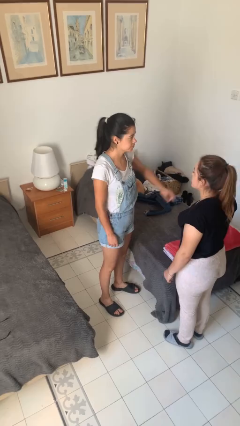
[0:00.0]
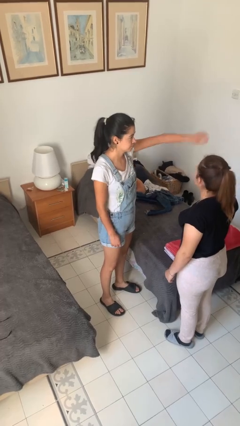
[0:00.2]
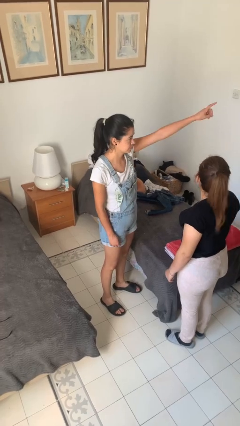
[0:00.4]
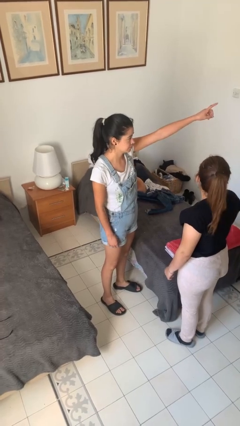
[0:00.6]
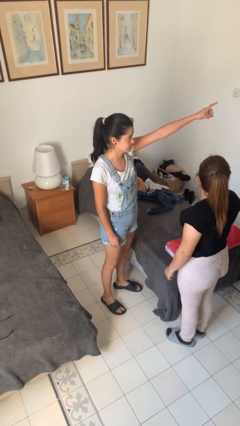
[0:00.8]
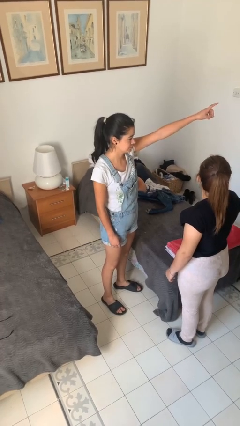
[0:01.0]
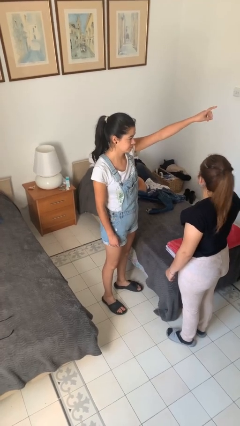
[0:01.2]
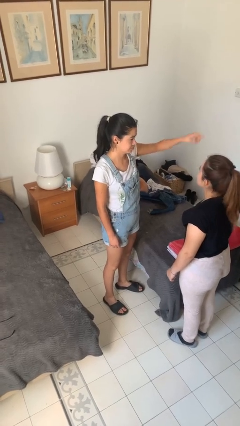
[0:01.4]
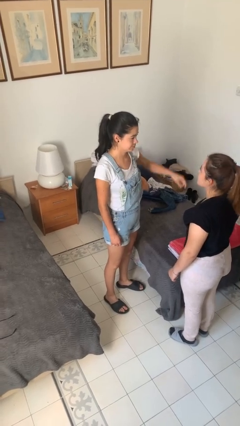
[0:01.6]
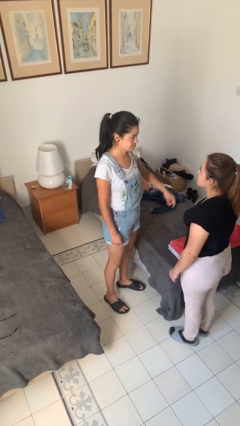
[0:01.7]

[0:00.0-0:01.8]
person points at person

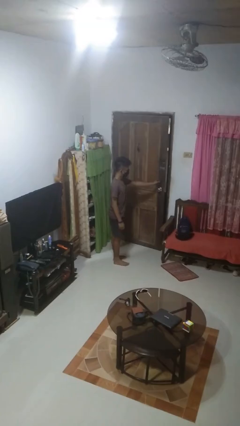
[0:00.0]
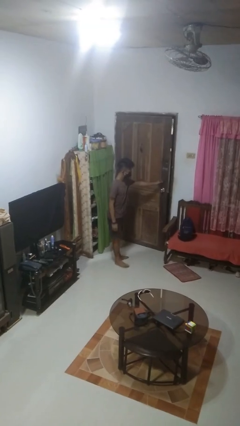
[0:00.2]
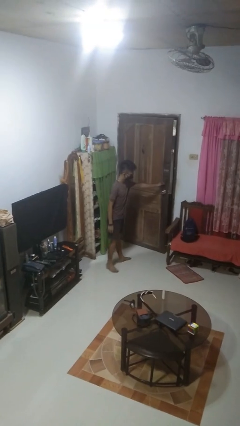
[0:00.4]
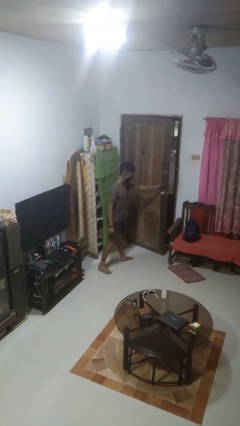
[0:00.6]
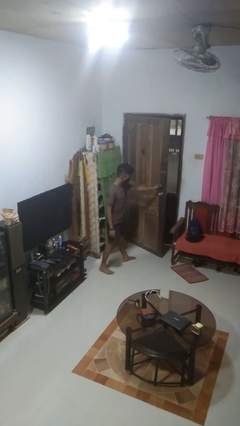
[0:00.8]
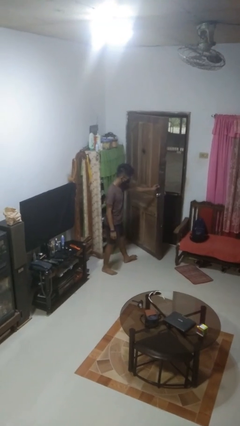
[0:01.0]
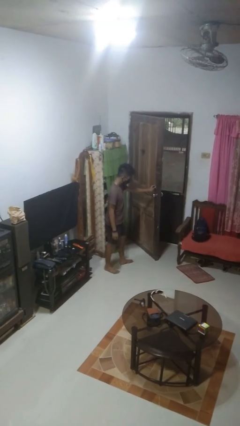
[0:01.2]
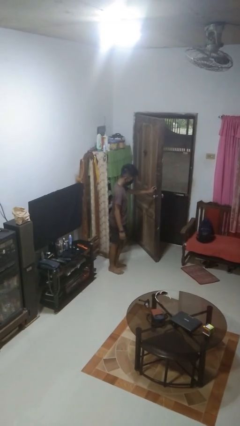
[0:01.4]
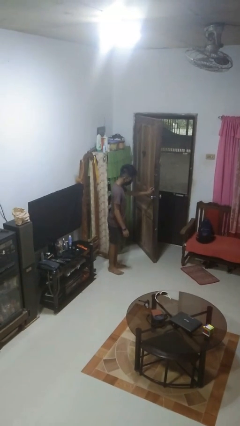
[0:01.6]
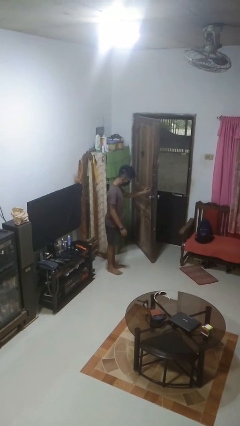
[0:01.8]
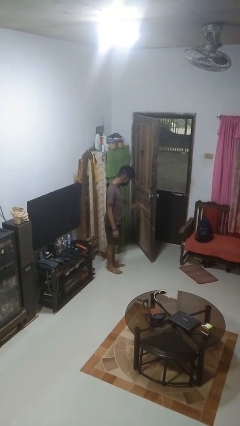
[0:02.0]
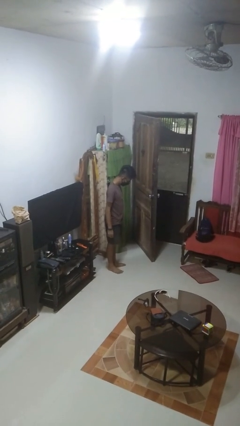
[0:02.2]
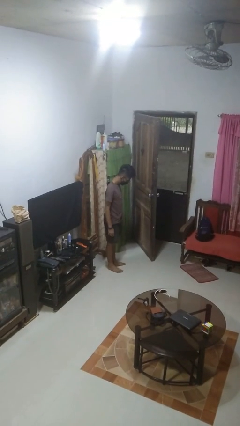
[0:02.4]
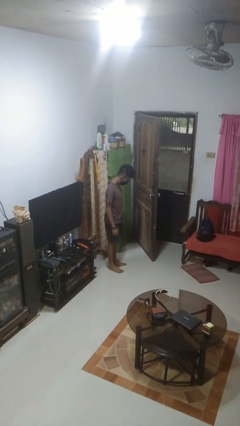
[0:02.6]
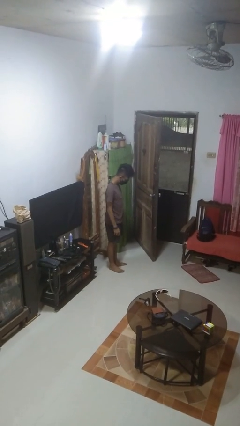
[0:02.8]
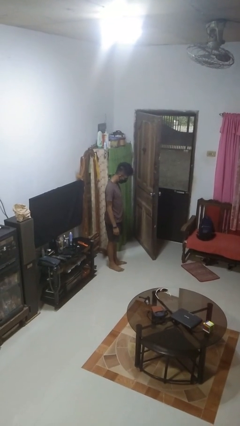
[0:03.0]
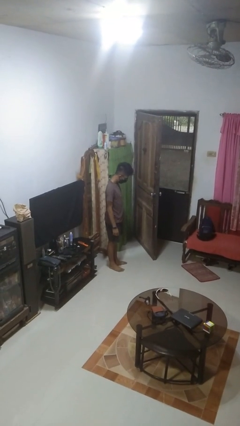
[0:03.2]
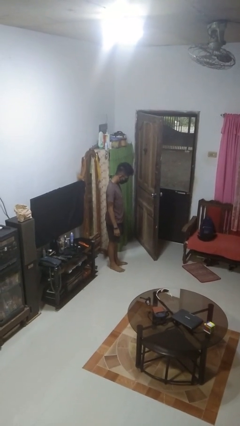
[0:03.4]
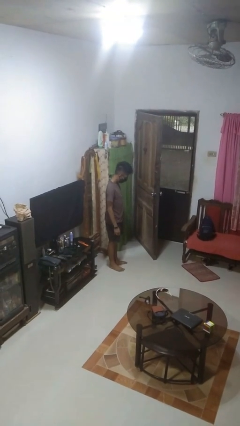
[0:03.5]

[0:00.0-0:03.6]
person opens facility door

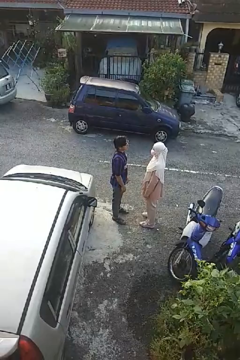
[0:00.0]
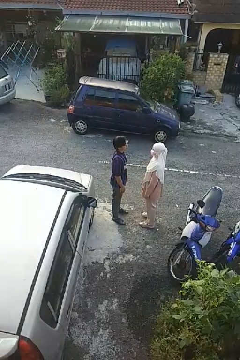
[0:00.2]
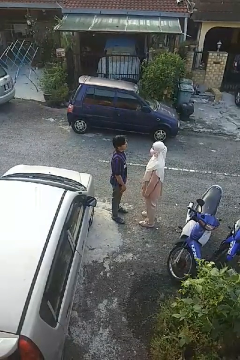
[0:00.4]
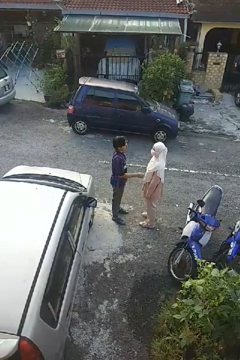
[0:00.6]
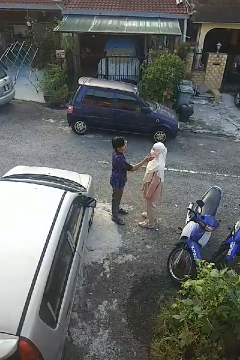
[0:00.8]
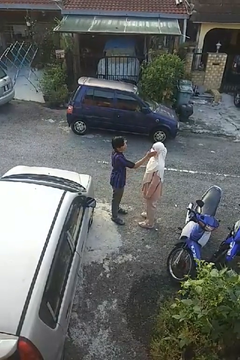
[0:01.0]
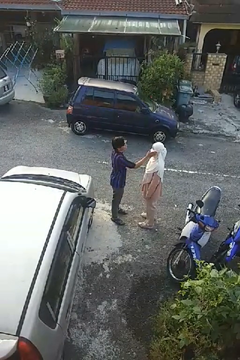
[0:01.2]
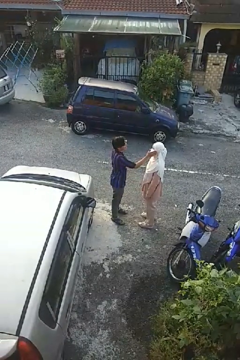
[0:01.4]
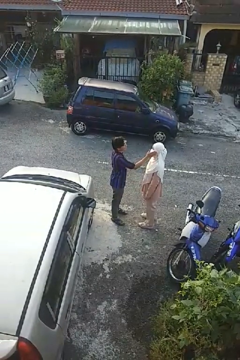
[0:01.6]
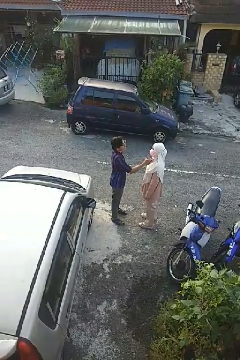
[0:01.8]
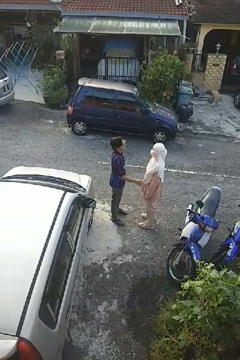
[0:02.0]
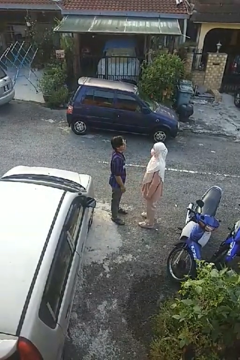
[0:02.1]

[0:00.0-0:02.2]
person touches face of person

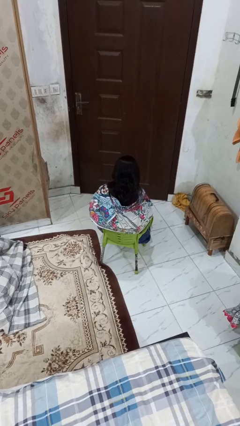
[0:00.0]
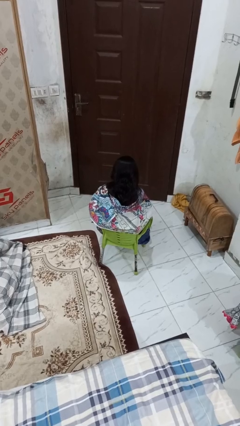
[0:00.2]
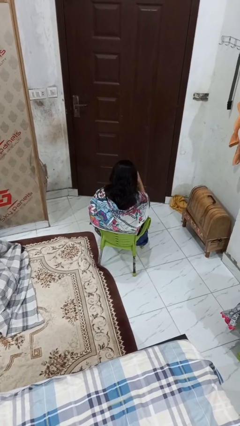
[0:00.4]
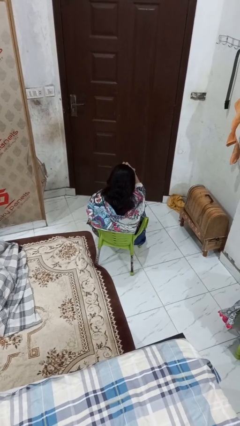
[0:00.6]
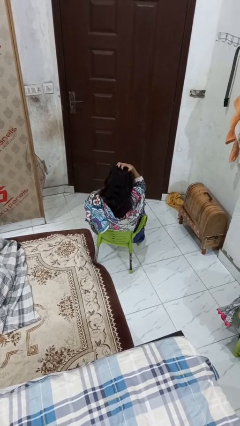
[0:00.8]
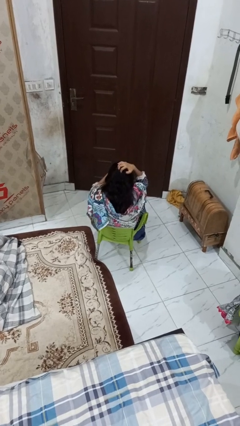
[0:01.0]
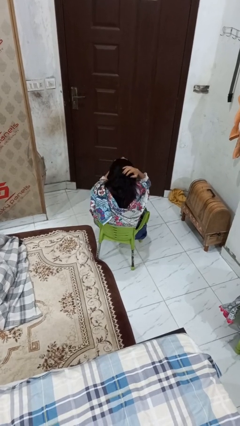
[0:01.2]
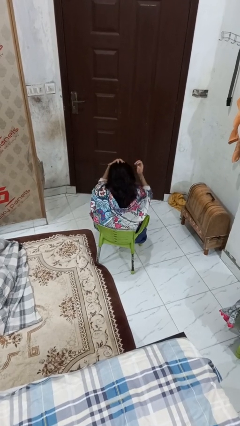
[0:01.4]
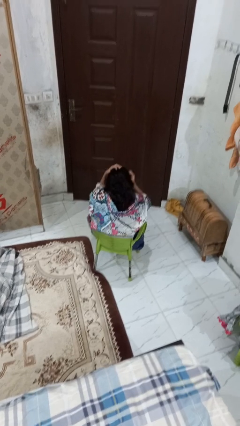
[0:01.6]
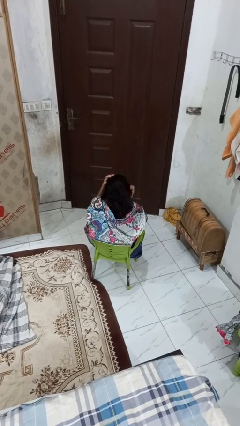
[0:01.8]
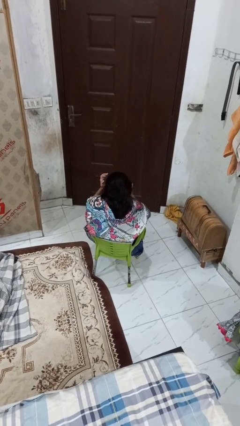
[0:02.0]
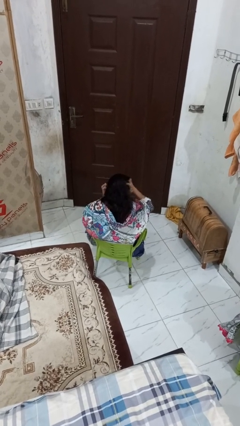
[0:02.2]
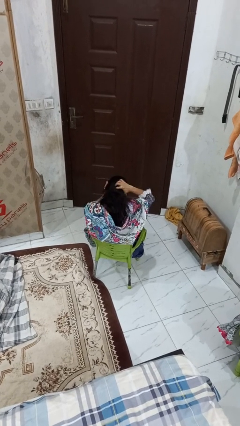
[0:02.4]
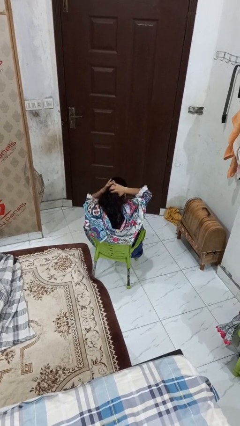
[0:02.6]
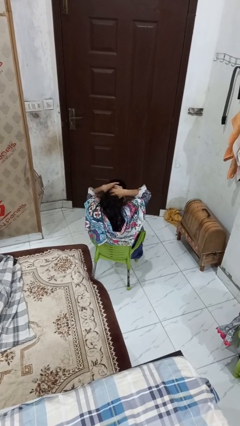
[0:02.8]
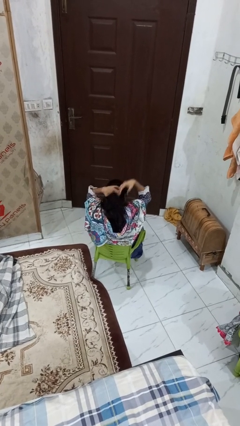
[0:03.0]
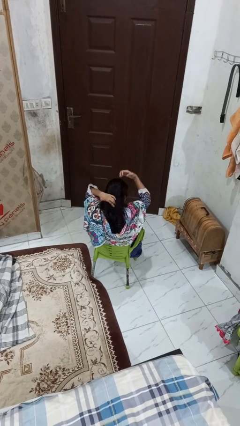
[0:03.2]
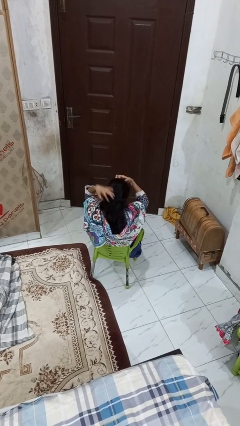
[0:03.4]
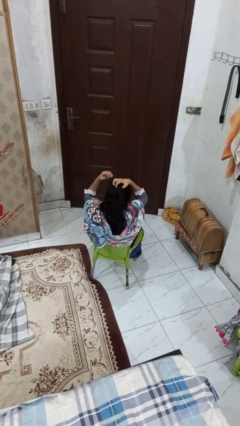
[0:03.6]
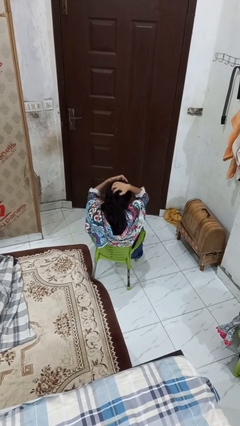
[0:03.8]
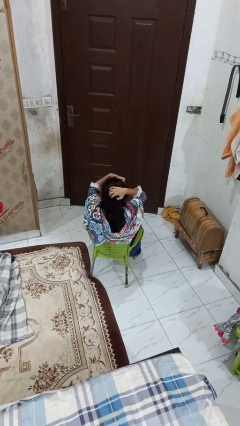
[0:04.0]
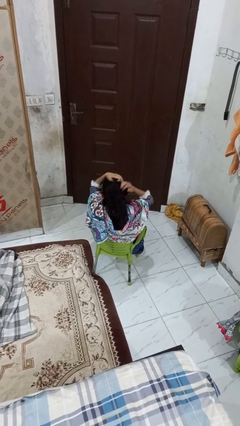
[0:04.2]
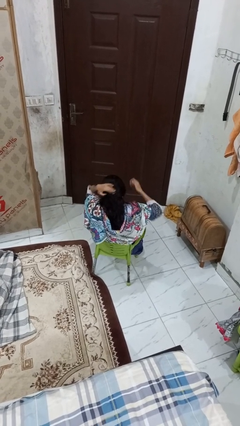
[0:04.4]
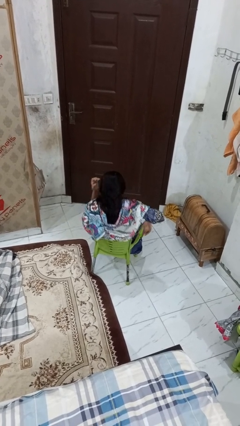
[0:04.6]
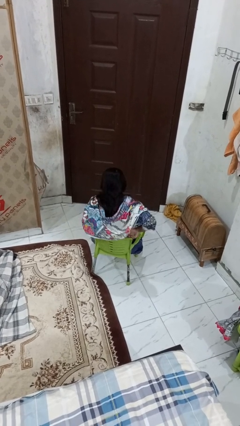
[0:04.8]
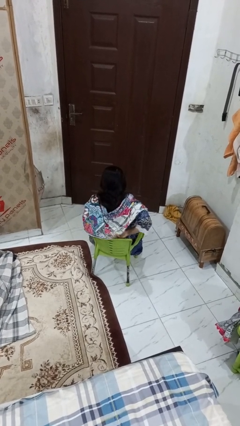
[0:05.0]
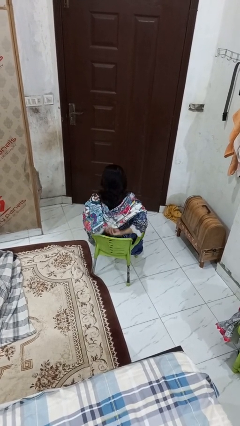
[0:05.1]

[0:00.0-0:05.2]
person strokes hair

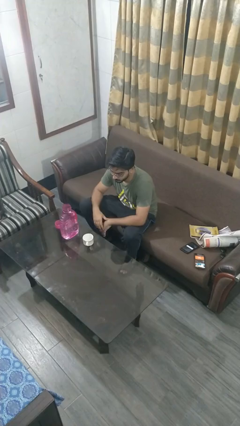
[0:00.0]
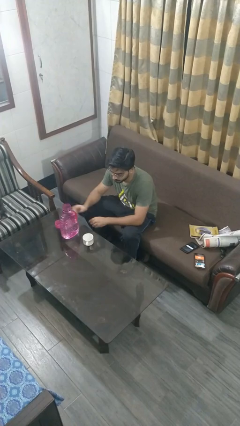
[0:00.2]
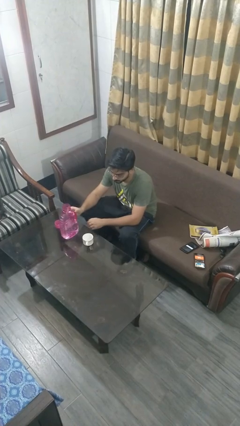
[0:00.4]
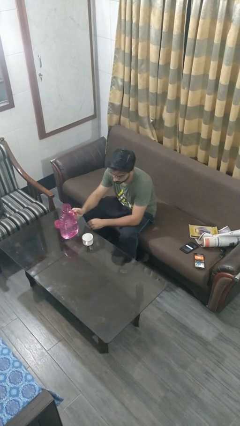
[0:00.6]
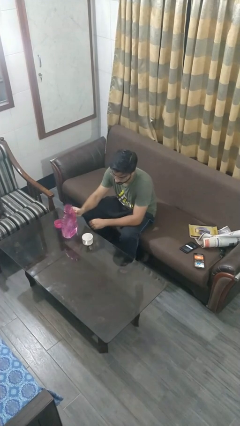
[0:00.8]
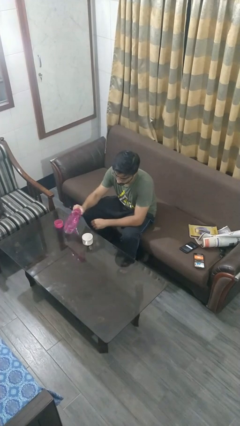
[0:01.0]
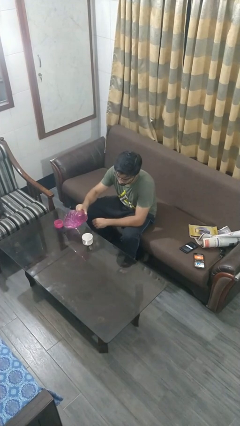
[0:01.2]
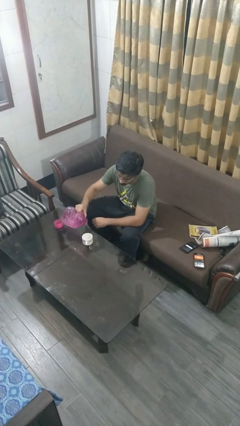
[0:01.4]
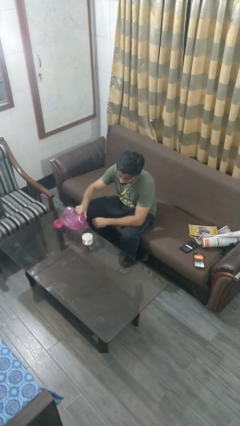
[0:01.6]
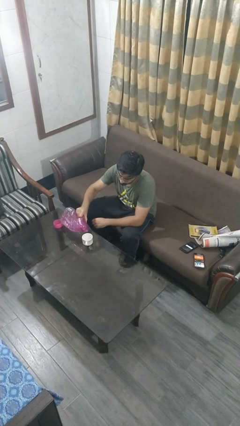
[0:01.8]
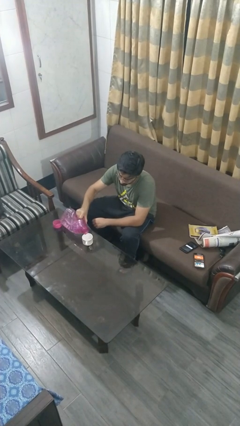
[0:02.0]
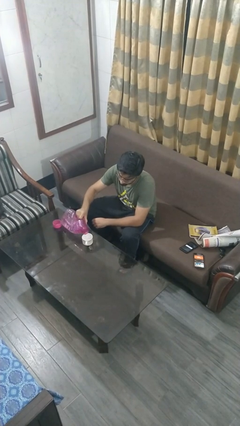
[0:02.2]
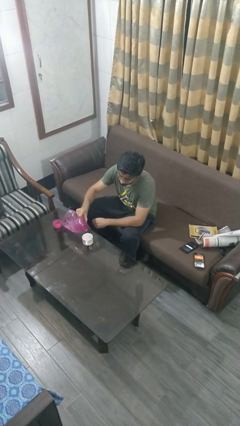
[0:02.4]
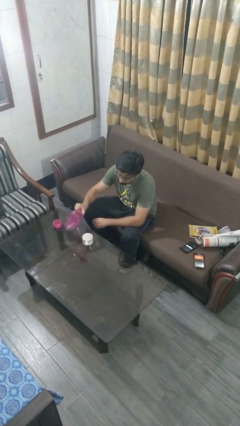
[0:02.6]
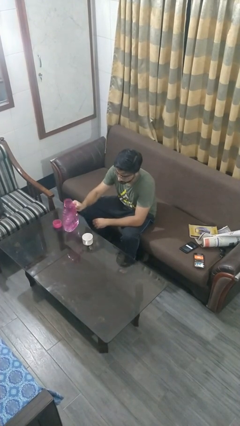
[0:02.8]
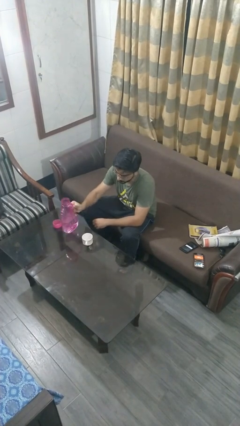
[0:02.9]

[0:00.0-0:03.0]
person pours liquid into cup

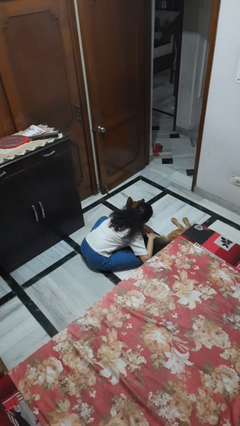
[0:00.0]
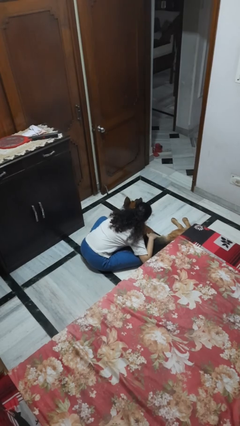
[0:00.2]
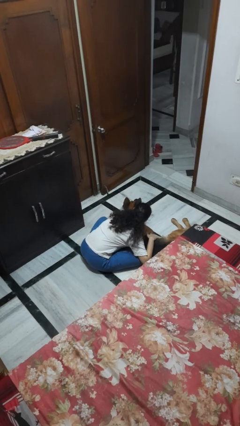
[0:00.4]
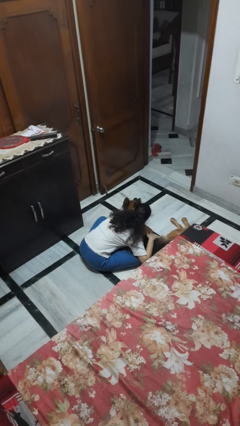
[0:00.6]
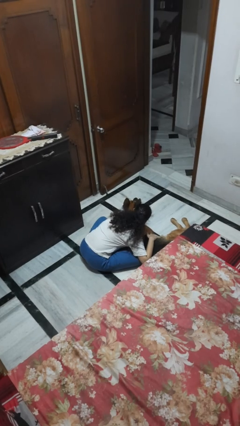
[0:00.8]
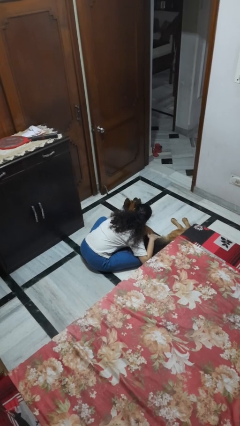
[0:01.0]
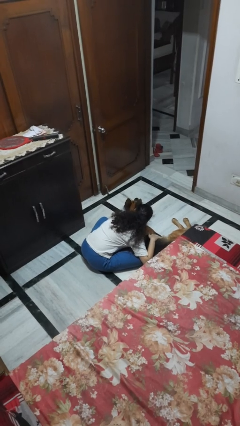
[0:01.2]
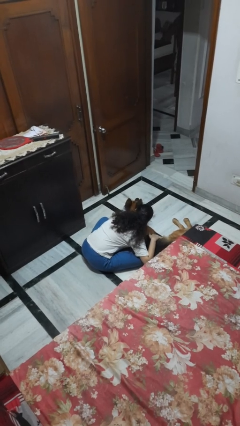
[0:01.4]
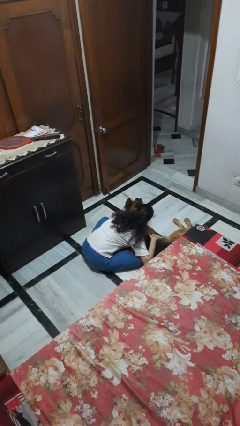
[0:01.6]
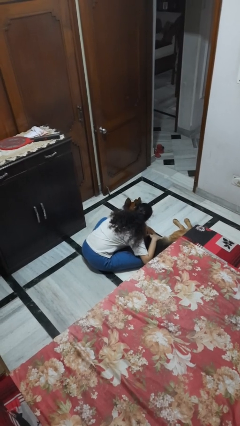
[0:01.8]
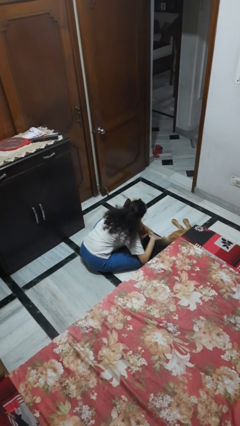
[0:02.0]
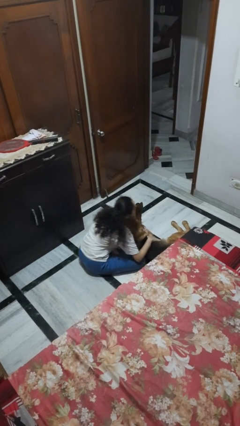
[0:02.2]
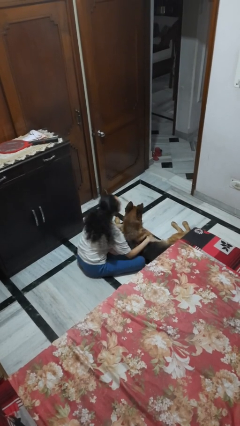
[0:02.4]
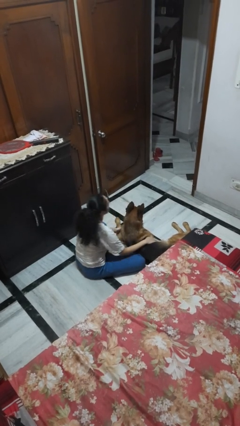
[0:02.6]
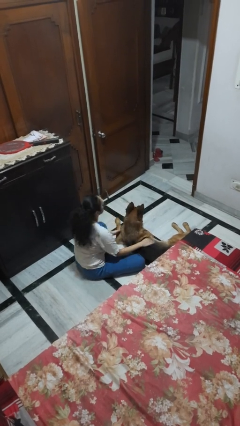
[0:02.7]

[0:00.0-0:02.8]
person hugs dog
